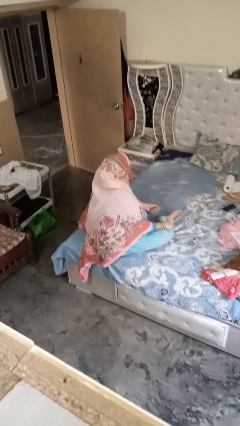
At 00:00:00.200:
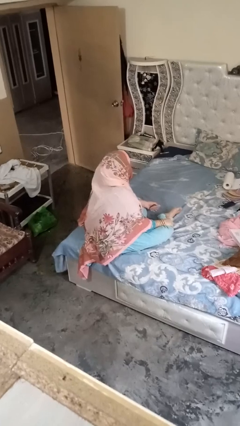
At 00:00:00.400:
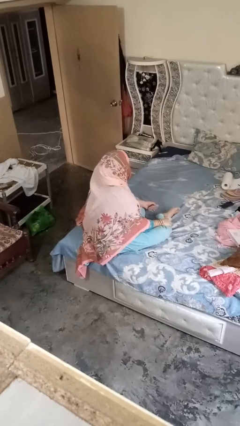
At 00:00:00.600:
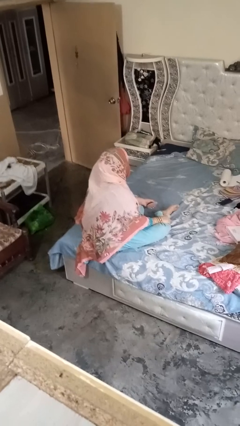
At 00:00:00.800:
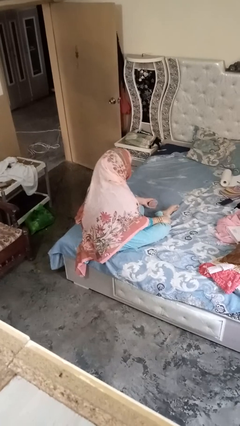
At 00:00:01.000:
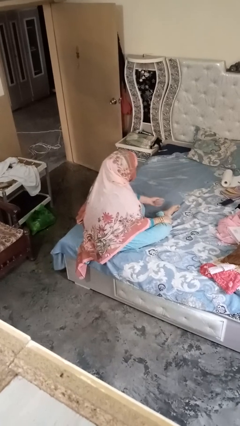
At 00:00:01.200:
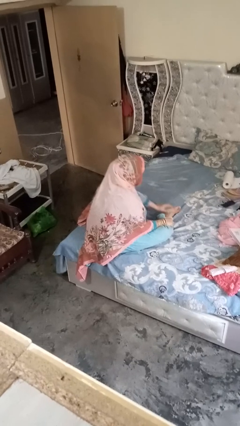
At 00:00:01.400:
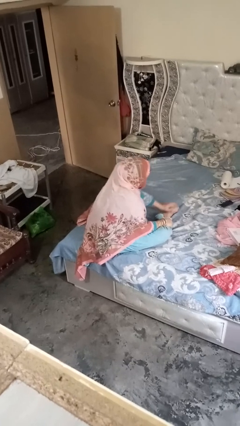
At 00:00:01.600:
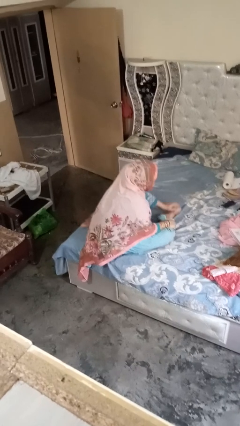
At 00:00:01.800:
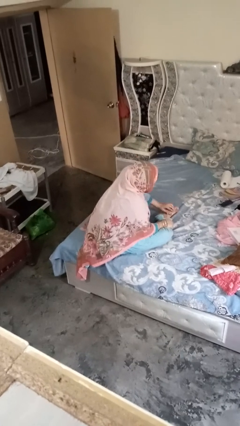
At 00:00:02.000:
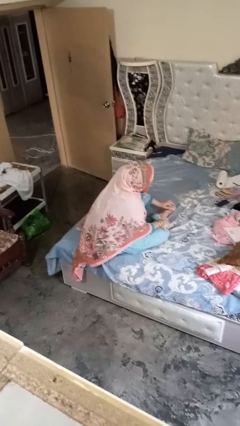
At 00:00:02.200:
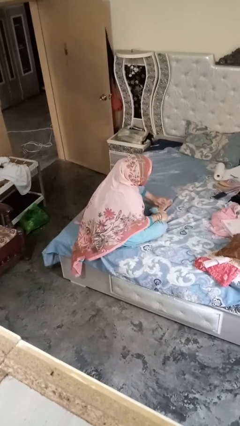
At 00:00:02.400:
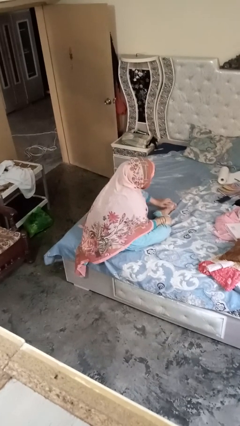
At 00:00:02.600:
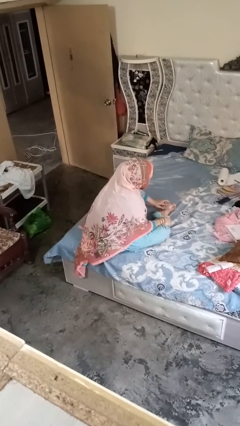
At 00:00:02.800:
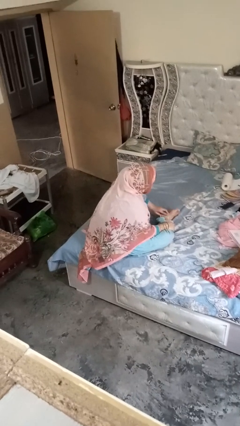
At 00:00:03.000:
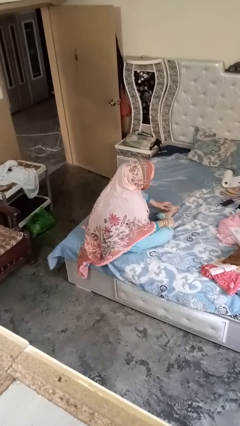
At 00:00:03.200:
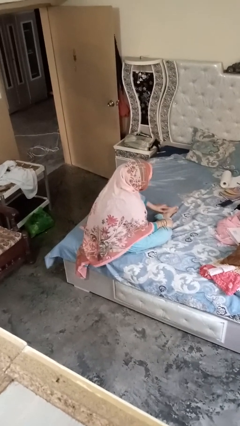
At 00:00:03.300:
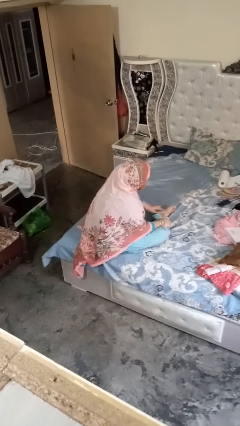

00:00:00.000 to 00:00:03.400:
person rubs foot

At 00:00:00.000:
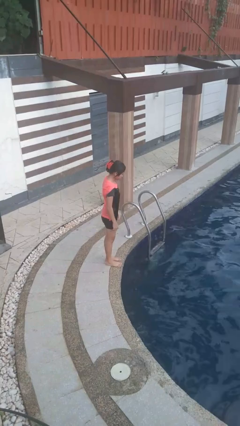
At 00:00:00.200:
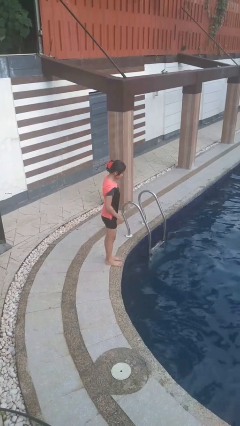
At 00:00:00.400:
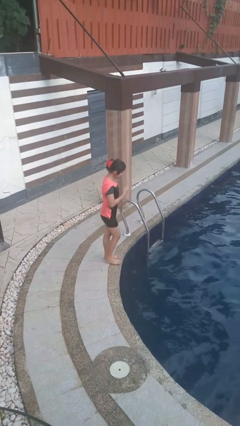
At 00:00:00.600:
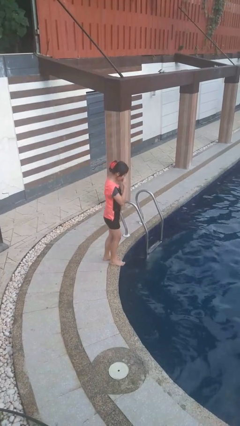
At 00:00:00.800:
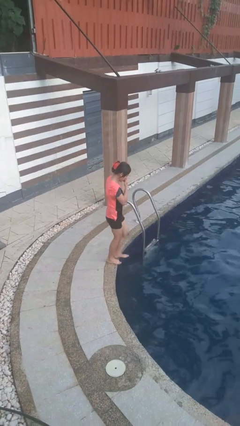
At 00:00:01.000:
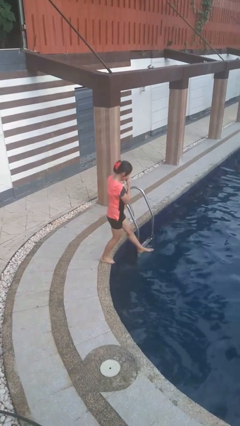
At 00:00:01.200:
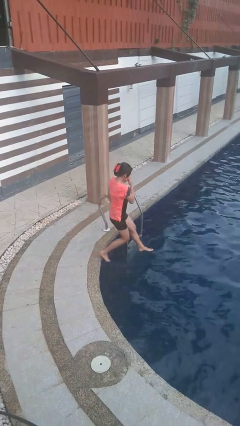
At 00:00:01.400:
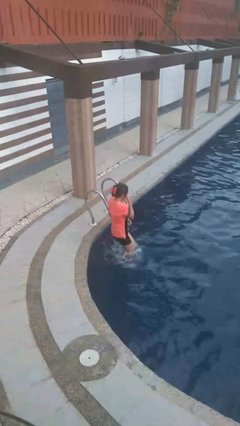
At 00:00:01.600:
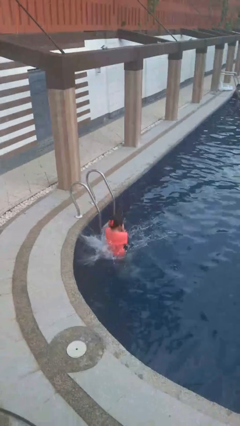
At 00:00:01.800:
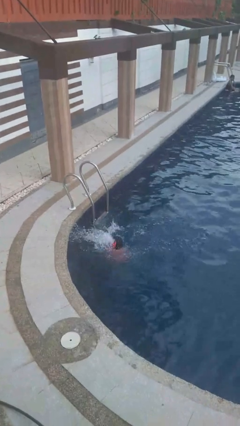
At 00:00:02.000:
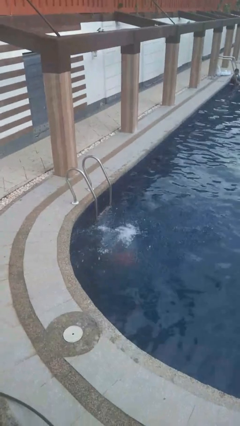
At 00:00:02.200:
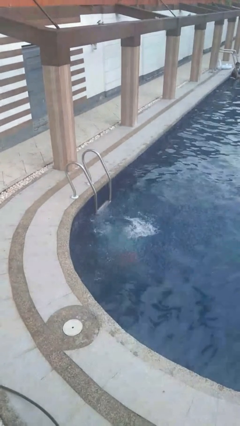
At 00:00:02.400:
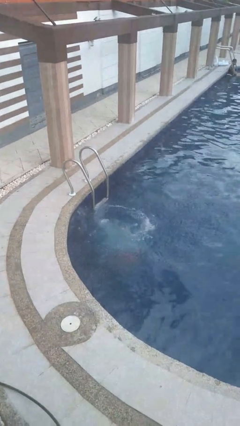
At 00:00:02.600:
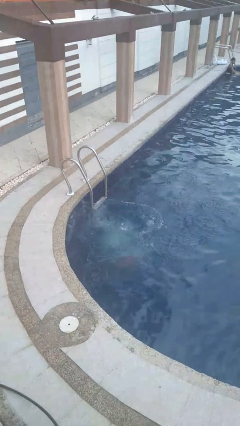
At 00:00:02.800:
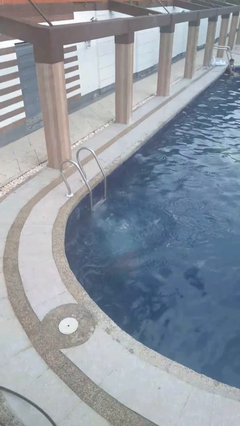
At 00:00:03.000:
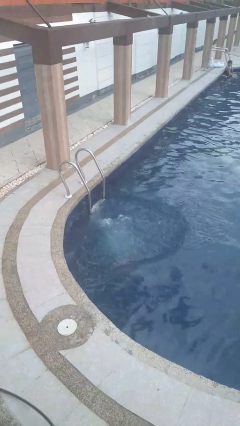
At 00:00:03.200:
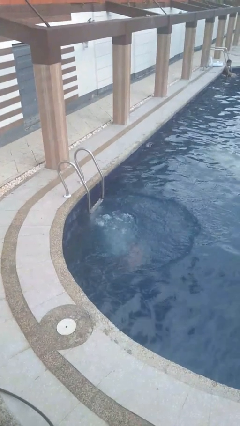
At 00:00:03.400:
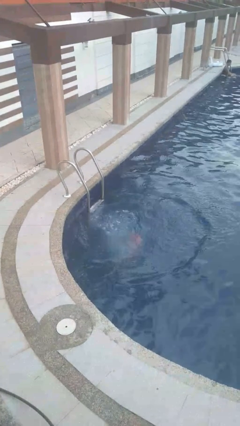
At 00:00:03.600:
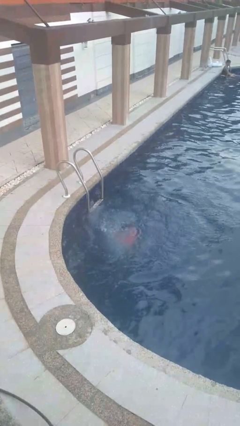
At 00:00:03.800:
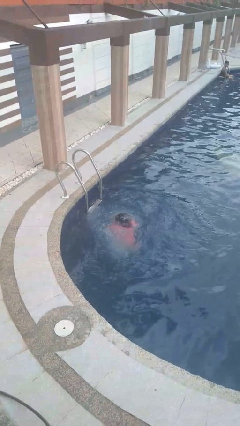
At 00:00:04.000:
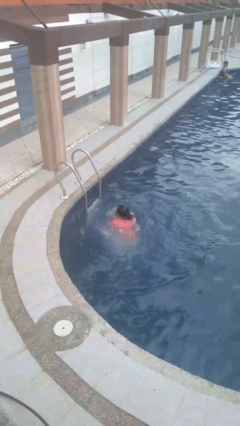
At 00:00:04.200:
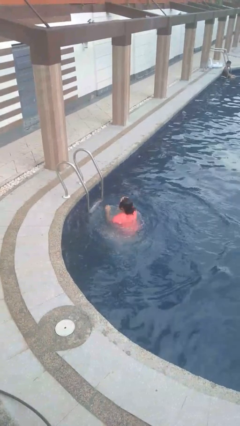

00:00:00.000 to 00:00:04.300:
person jumps into pool

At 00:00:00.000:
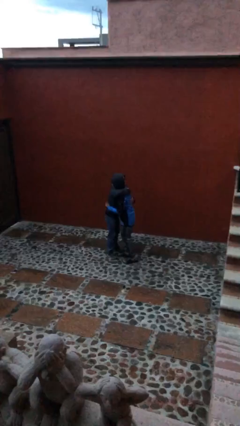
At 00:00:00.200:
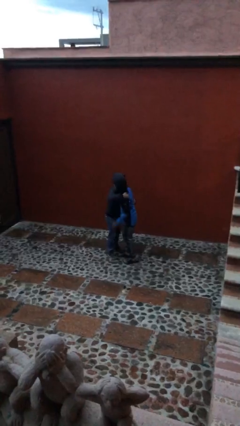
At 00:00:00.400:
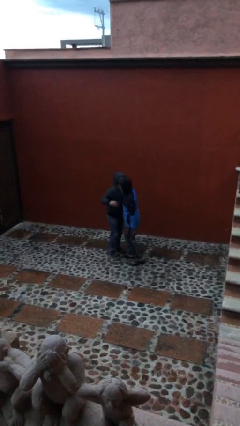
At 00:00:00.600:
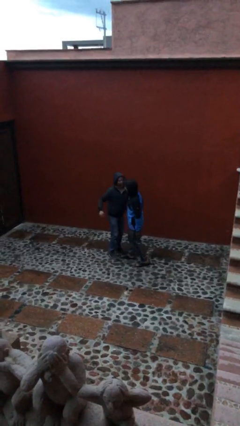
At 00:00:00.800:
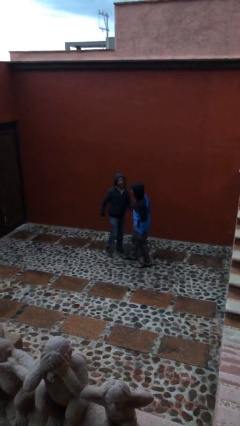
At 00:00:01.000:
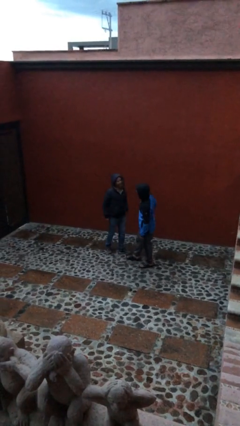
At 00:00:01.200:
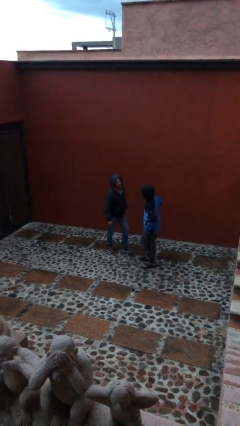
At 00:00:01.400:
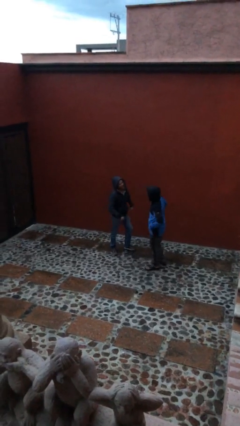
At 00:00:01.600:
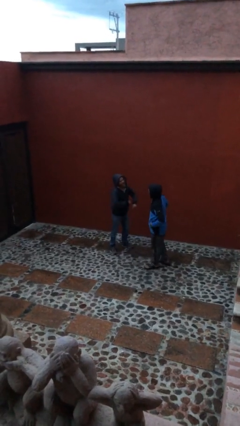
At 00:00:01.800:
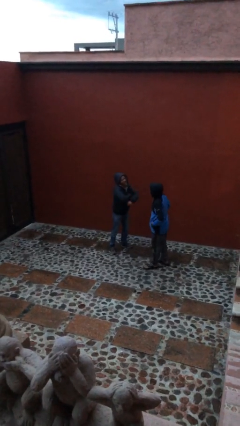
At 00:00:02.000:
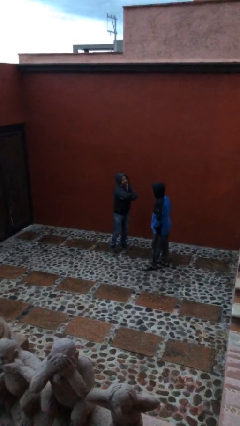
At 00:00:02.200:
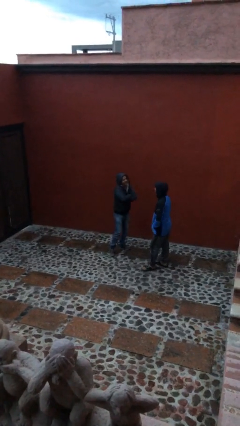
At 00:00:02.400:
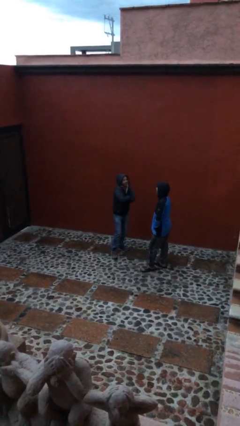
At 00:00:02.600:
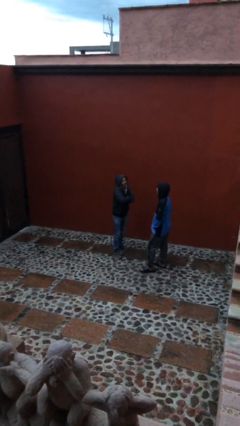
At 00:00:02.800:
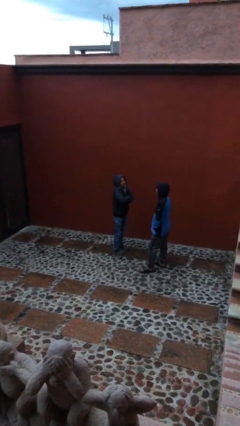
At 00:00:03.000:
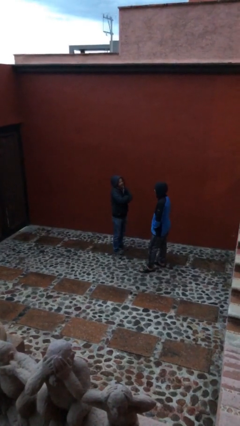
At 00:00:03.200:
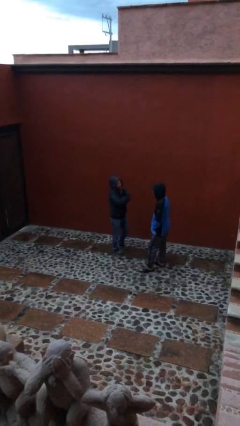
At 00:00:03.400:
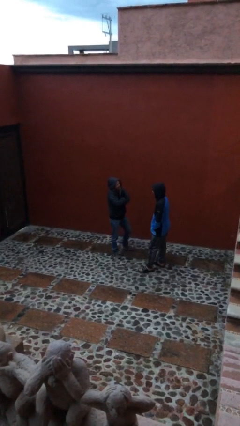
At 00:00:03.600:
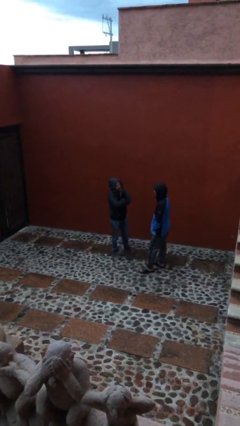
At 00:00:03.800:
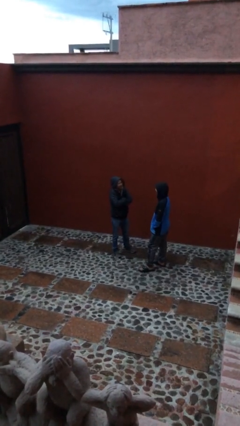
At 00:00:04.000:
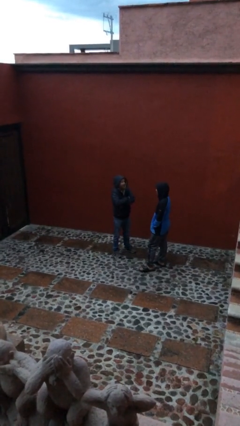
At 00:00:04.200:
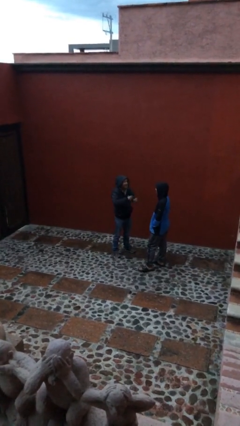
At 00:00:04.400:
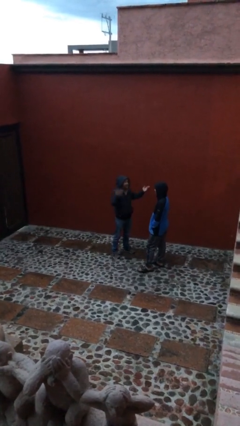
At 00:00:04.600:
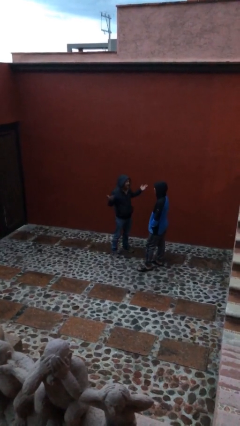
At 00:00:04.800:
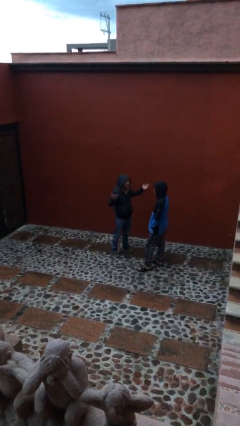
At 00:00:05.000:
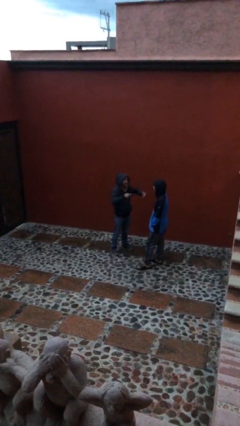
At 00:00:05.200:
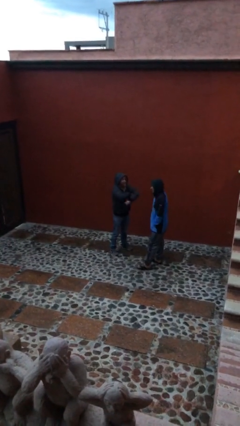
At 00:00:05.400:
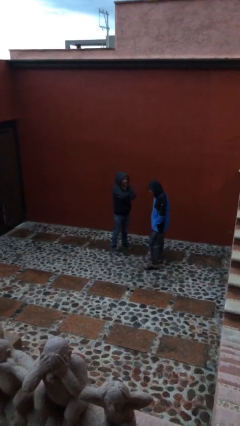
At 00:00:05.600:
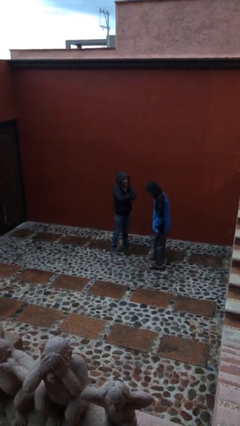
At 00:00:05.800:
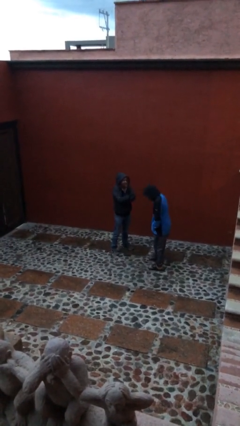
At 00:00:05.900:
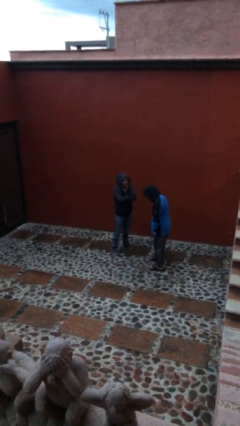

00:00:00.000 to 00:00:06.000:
person talks to person

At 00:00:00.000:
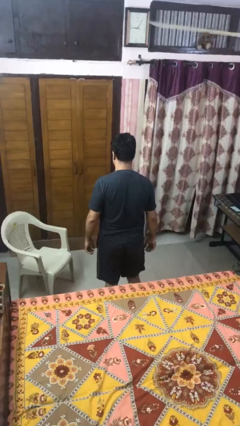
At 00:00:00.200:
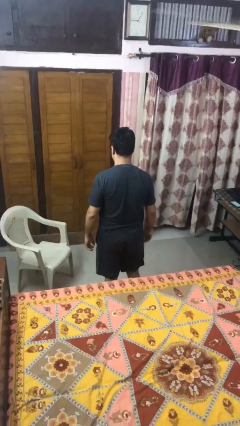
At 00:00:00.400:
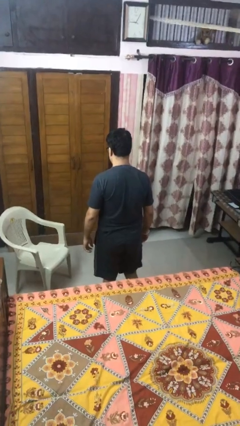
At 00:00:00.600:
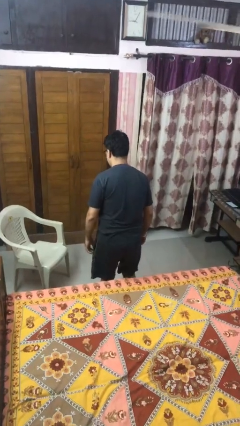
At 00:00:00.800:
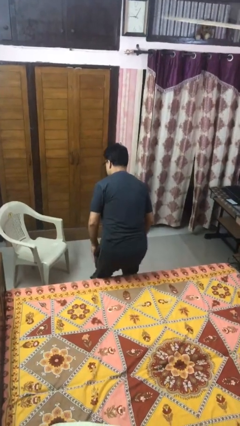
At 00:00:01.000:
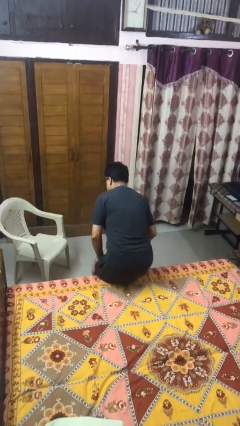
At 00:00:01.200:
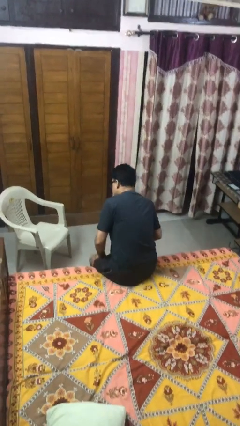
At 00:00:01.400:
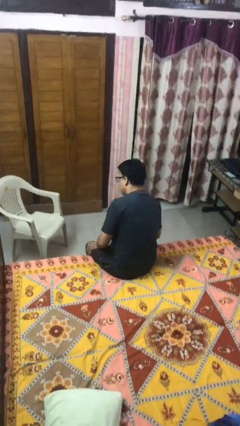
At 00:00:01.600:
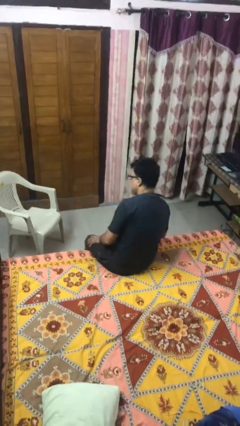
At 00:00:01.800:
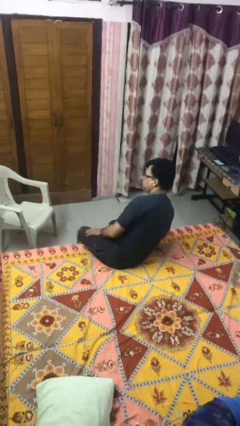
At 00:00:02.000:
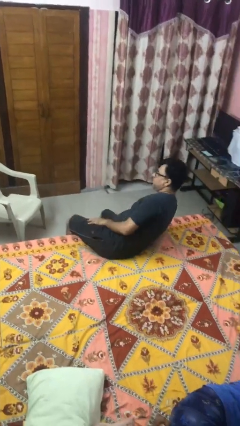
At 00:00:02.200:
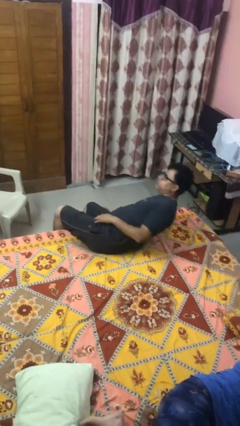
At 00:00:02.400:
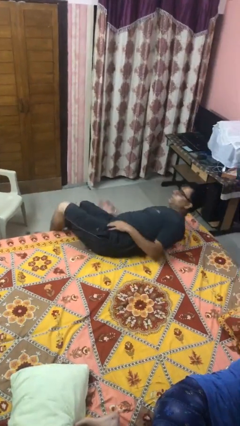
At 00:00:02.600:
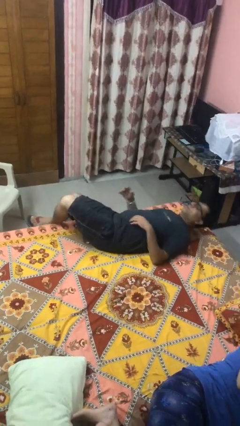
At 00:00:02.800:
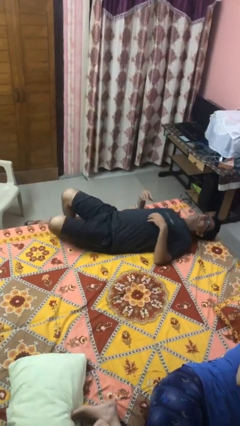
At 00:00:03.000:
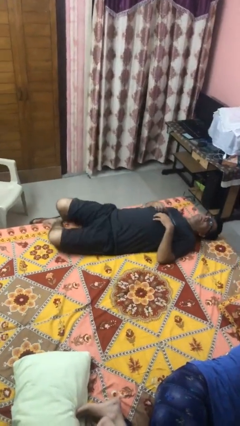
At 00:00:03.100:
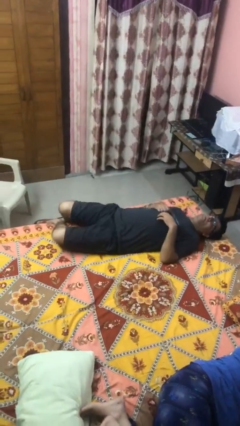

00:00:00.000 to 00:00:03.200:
person lies down on bed

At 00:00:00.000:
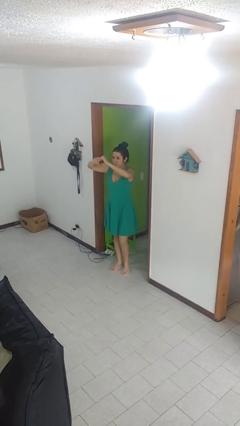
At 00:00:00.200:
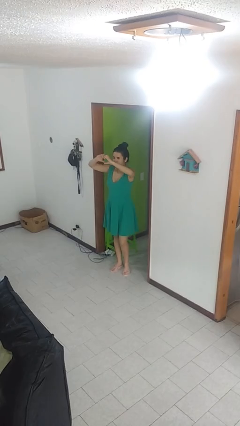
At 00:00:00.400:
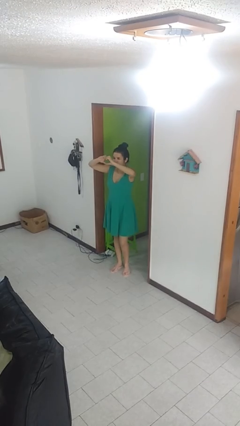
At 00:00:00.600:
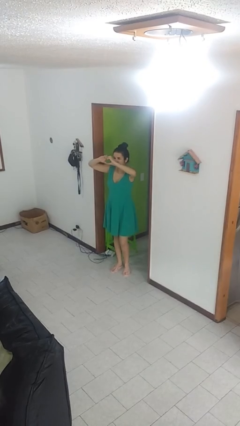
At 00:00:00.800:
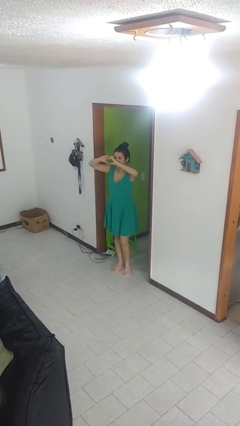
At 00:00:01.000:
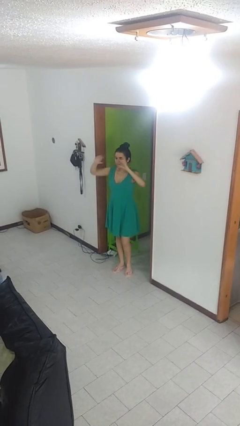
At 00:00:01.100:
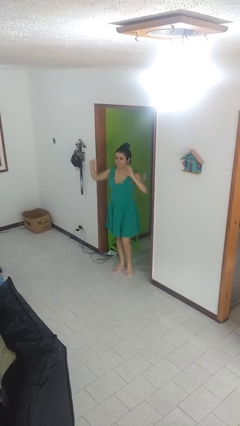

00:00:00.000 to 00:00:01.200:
person gestures heart
